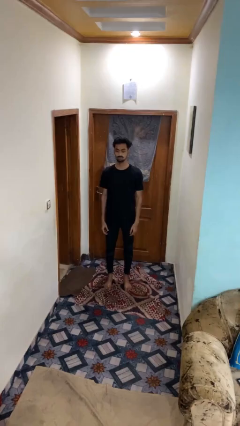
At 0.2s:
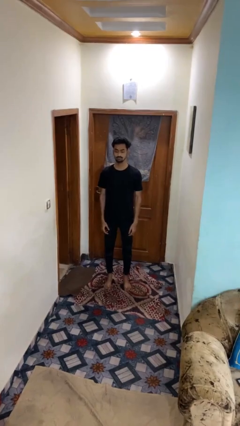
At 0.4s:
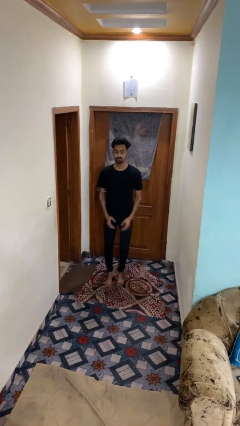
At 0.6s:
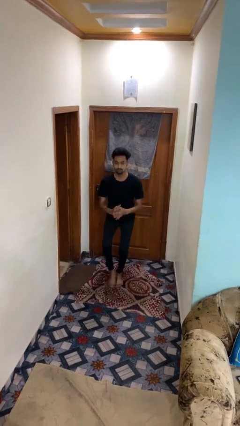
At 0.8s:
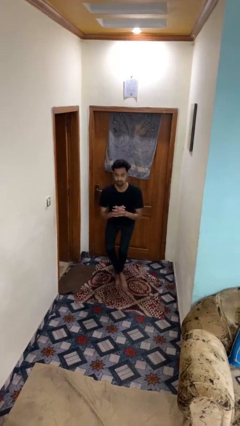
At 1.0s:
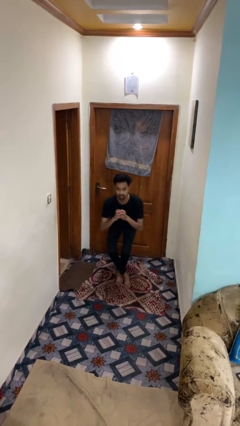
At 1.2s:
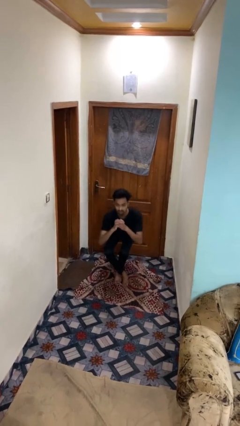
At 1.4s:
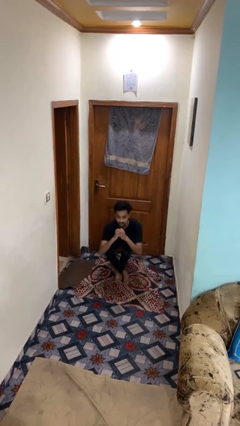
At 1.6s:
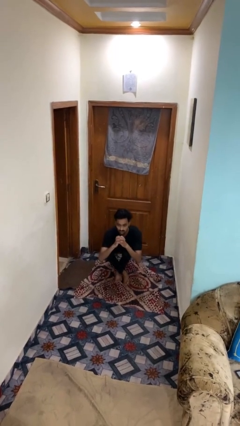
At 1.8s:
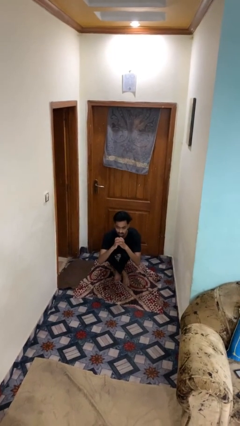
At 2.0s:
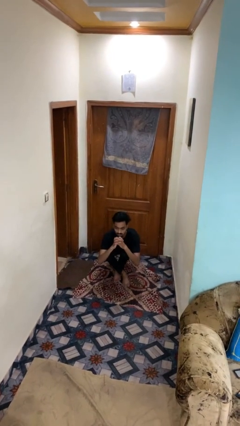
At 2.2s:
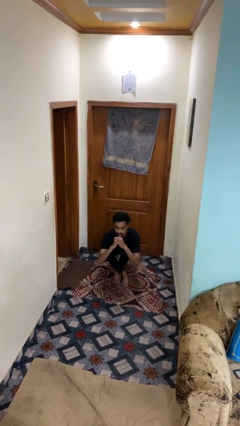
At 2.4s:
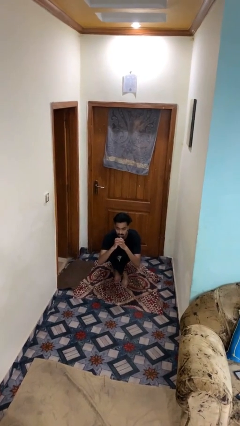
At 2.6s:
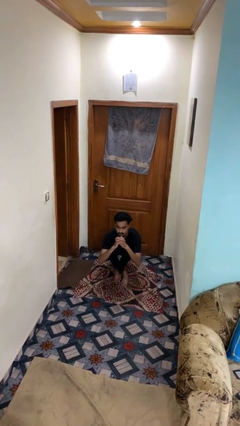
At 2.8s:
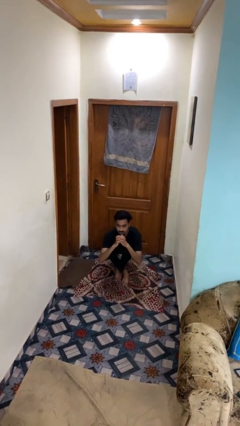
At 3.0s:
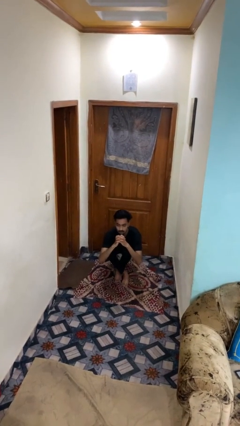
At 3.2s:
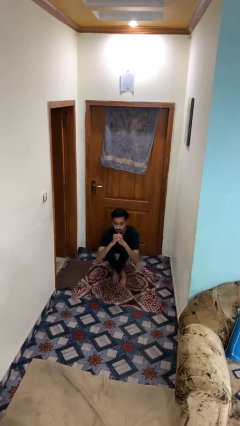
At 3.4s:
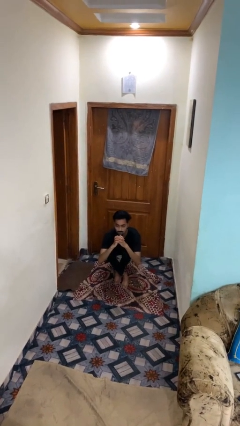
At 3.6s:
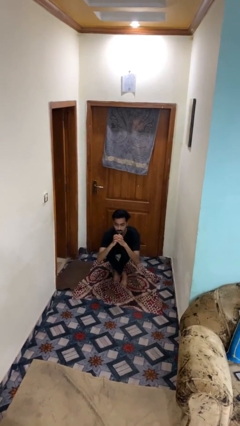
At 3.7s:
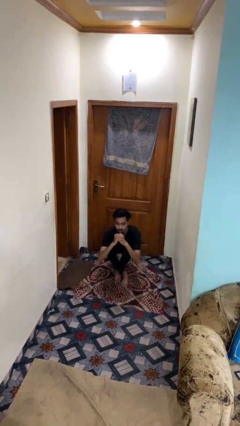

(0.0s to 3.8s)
person sits crisscross

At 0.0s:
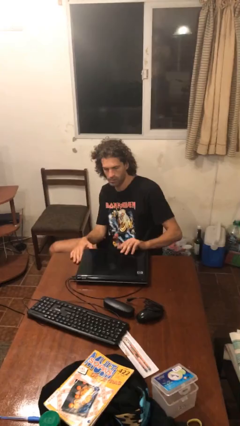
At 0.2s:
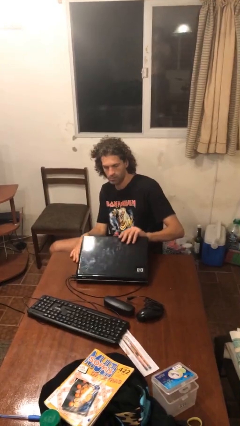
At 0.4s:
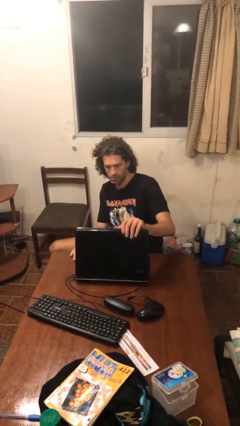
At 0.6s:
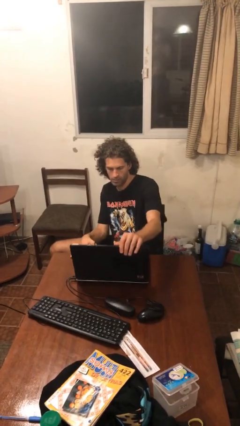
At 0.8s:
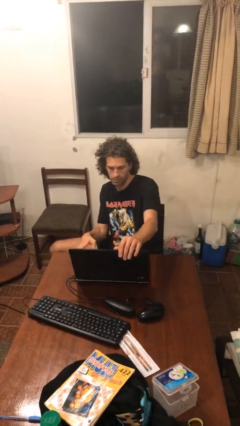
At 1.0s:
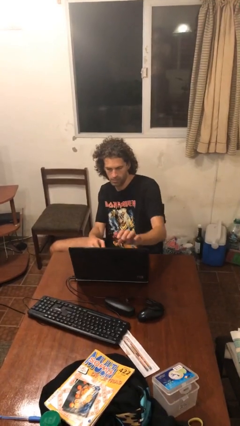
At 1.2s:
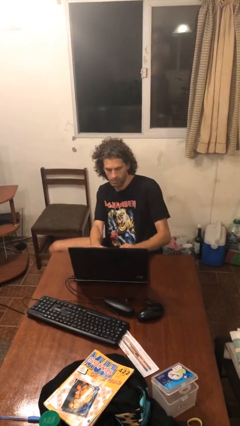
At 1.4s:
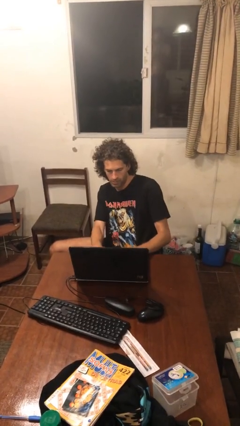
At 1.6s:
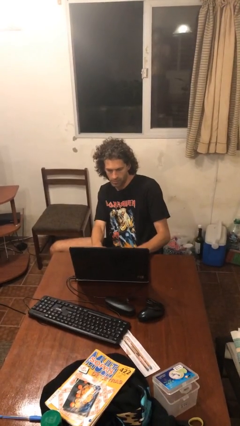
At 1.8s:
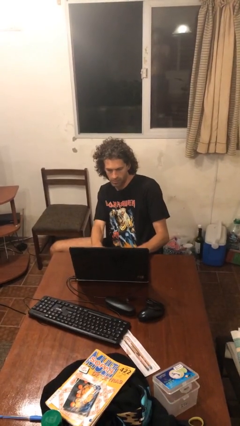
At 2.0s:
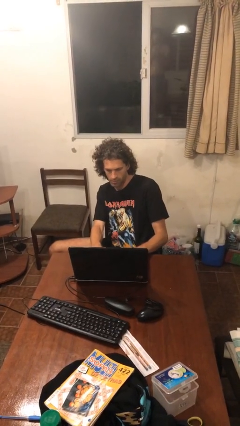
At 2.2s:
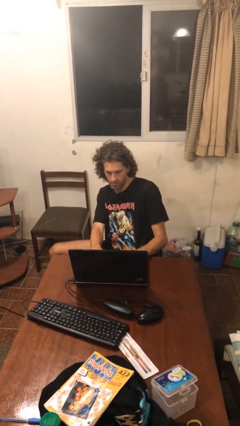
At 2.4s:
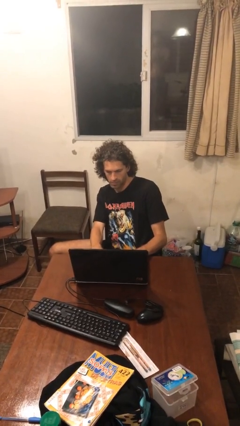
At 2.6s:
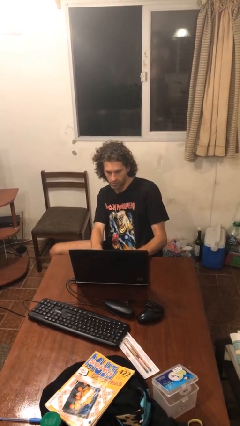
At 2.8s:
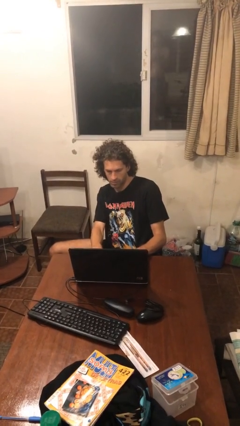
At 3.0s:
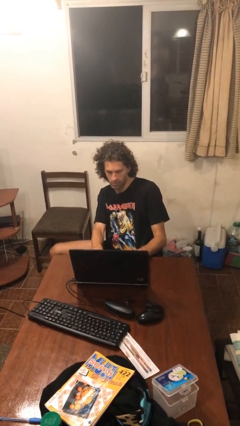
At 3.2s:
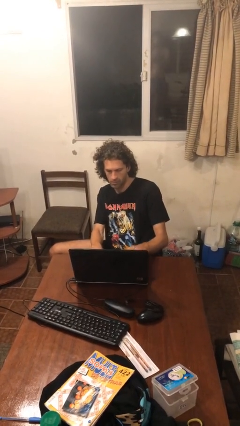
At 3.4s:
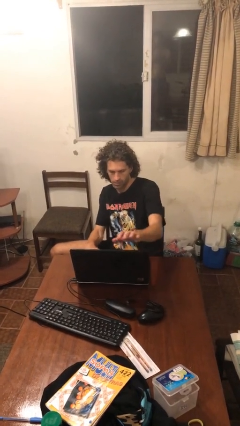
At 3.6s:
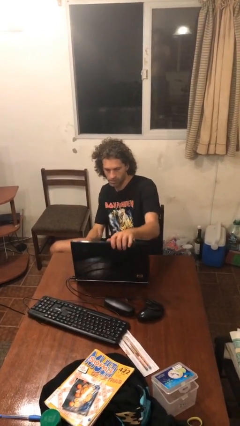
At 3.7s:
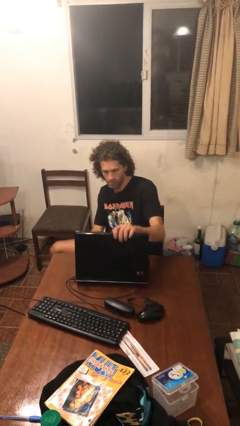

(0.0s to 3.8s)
person interacts with laptop

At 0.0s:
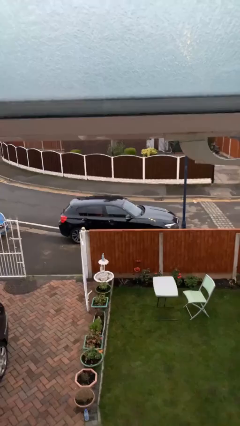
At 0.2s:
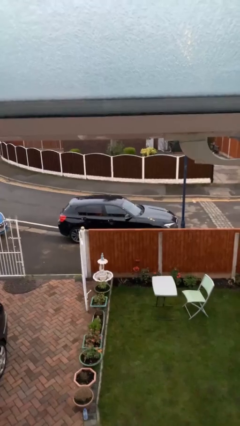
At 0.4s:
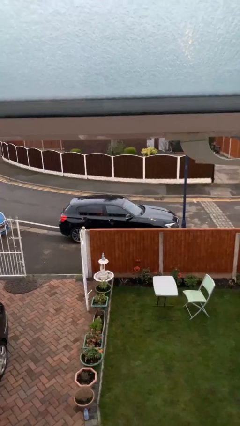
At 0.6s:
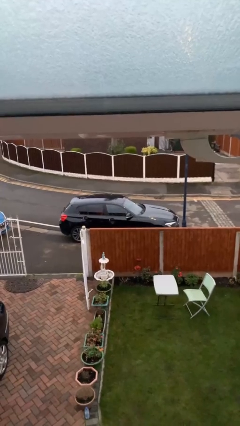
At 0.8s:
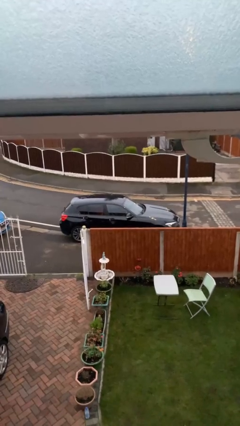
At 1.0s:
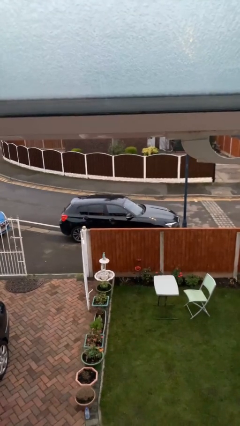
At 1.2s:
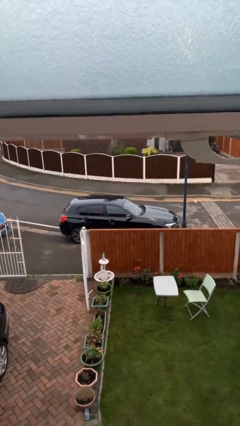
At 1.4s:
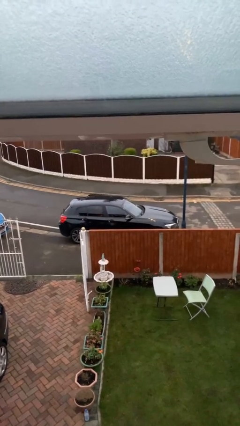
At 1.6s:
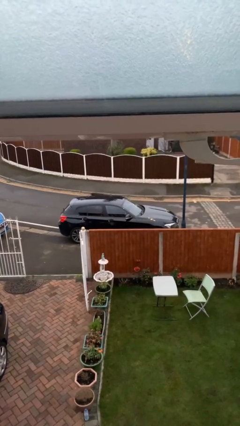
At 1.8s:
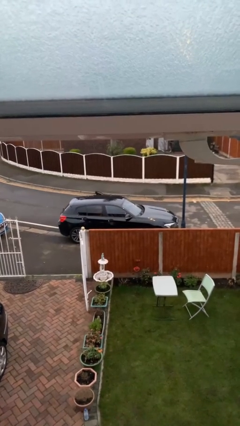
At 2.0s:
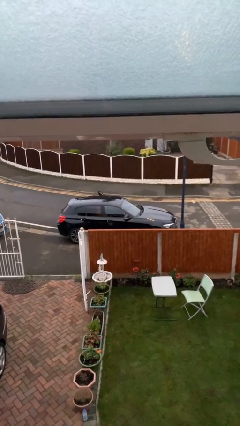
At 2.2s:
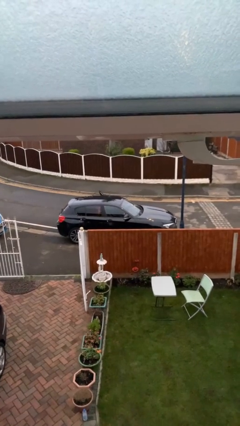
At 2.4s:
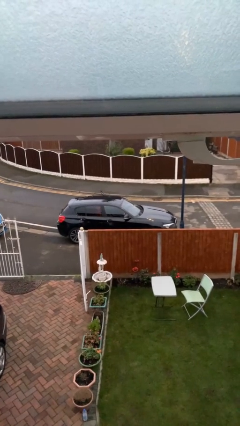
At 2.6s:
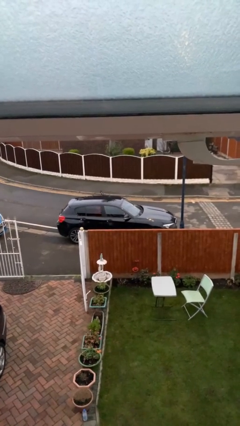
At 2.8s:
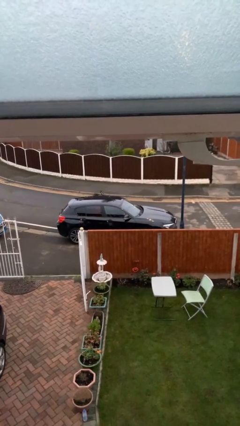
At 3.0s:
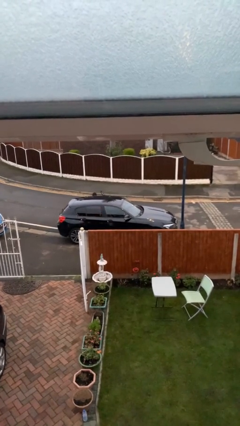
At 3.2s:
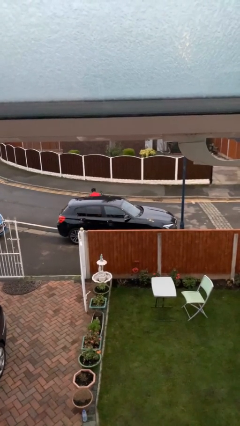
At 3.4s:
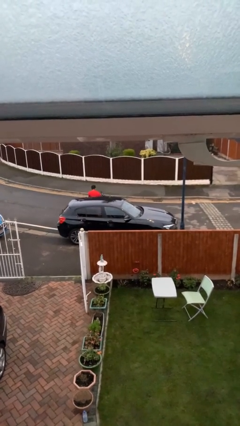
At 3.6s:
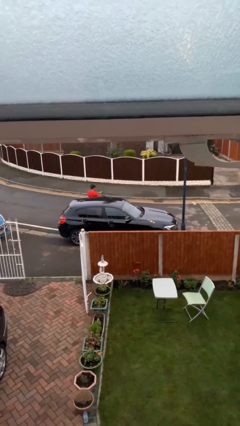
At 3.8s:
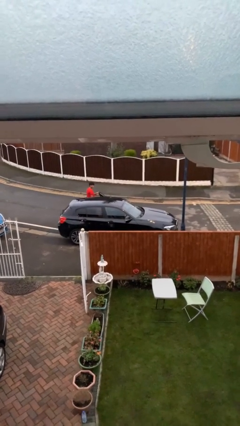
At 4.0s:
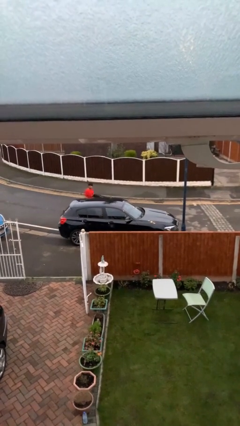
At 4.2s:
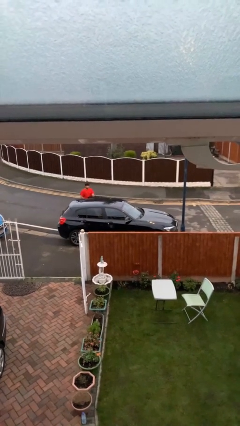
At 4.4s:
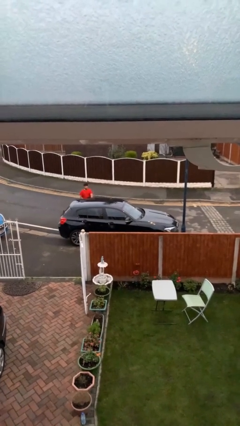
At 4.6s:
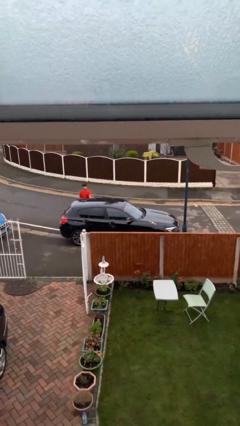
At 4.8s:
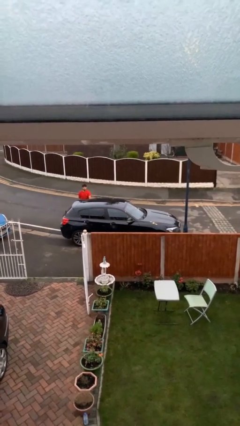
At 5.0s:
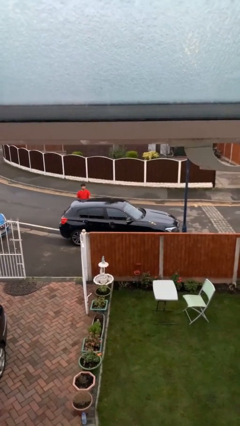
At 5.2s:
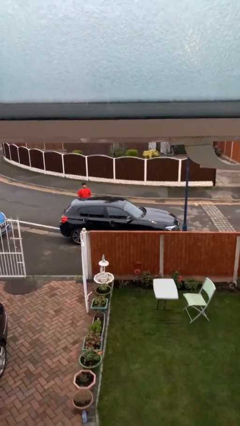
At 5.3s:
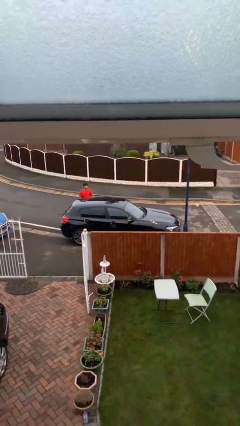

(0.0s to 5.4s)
car drops off person

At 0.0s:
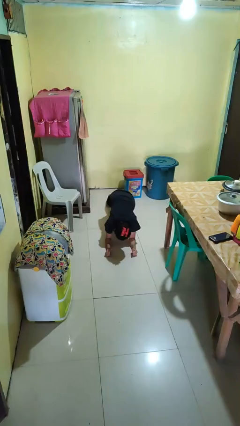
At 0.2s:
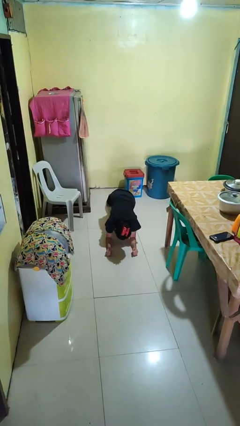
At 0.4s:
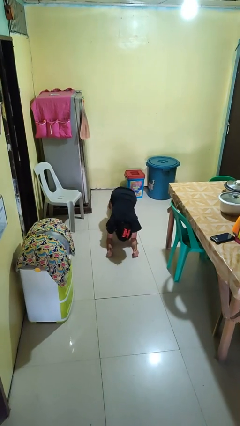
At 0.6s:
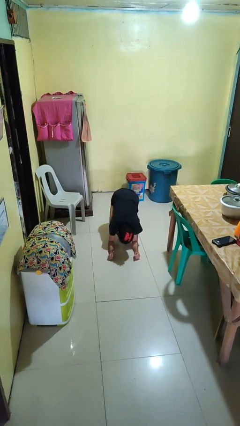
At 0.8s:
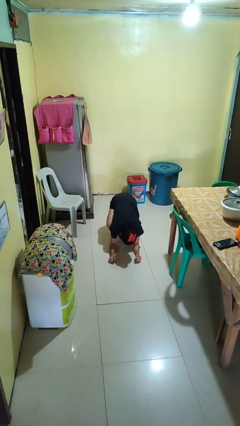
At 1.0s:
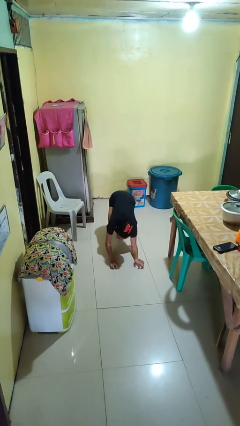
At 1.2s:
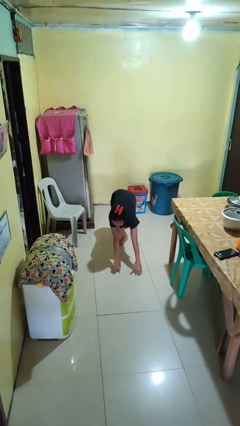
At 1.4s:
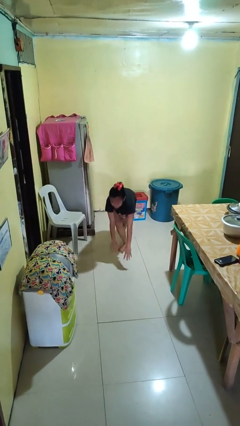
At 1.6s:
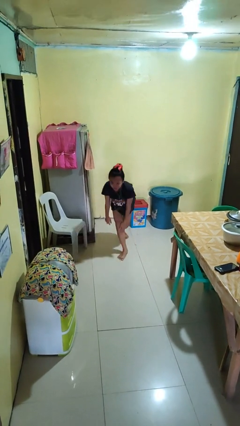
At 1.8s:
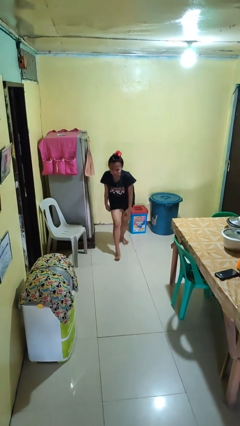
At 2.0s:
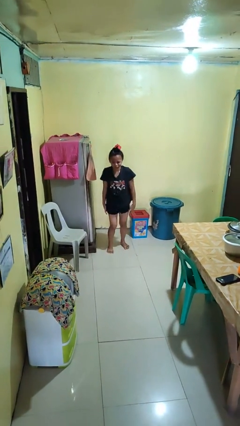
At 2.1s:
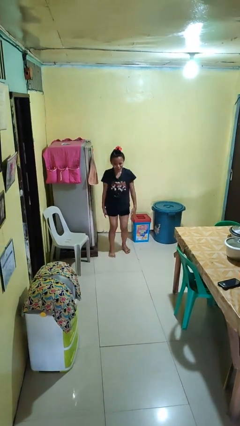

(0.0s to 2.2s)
person stands up from floor

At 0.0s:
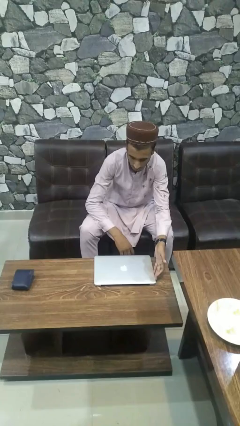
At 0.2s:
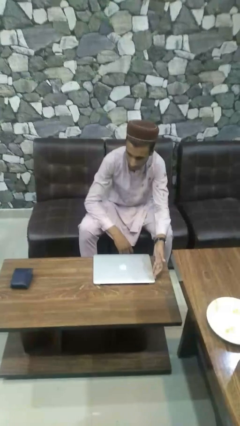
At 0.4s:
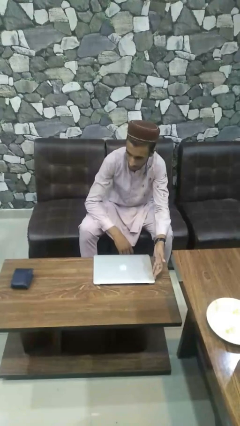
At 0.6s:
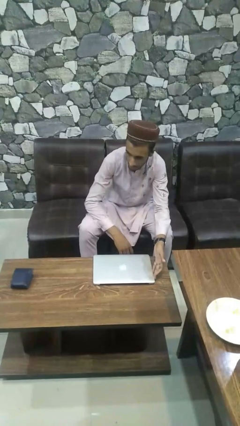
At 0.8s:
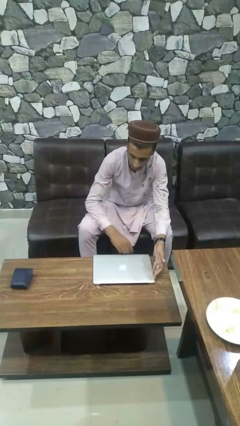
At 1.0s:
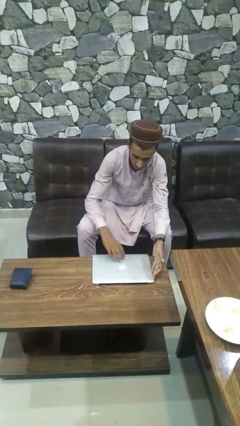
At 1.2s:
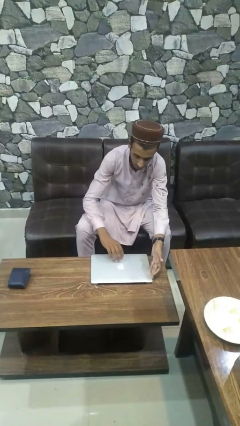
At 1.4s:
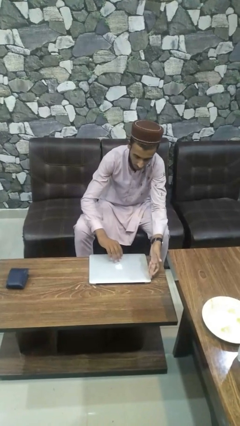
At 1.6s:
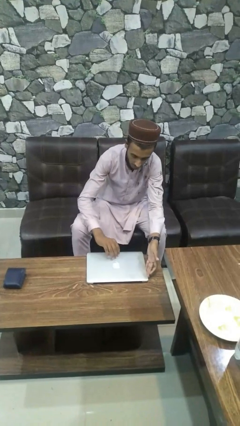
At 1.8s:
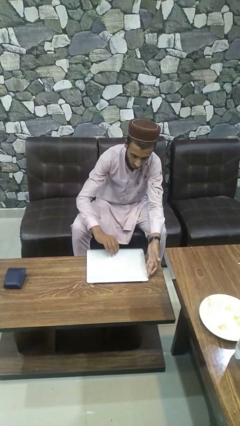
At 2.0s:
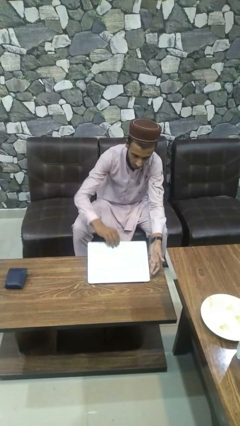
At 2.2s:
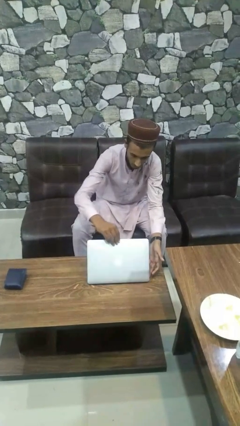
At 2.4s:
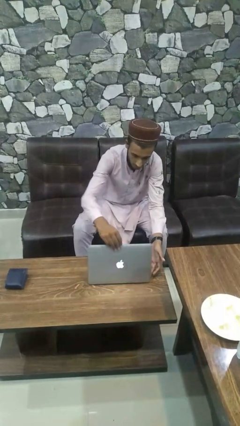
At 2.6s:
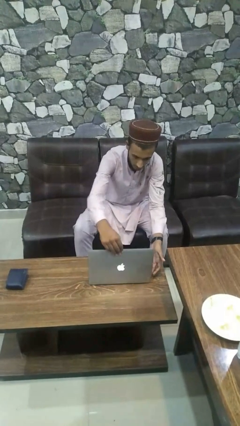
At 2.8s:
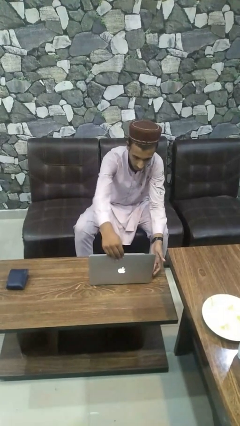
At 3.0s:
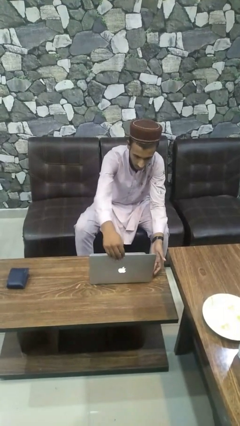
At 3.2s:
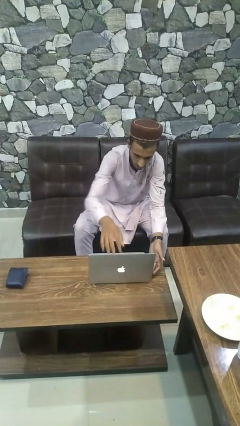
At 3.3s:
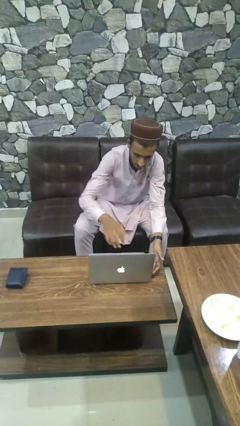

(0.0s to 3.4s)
person opens laptop
